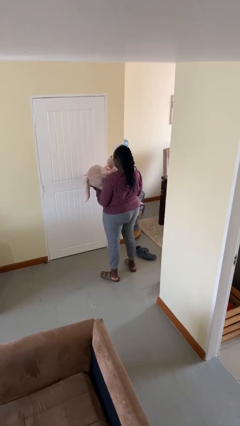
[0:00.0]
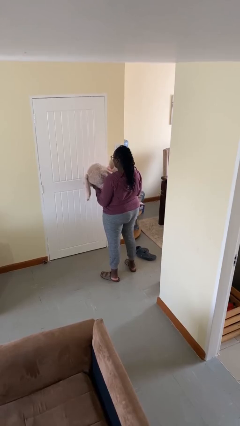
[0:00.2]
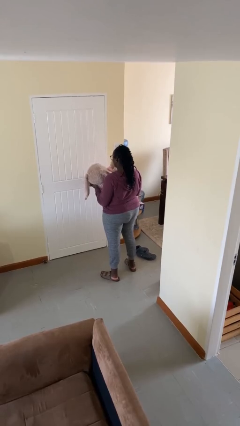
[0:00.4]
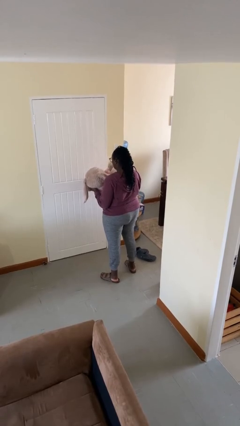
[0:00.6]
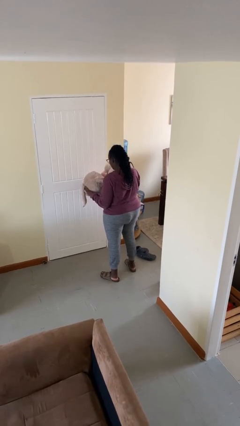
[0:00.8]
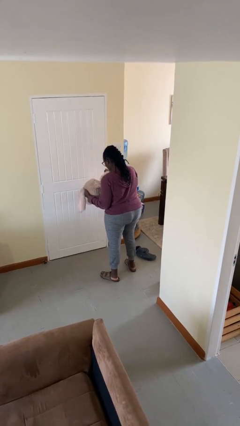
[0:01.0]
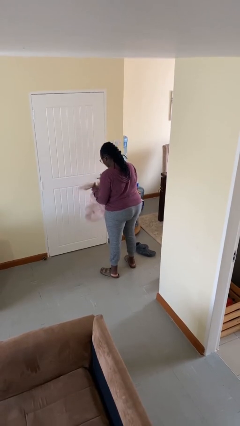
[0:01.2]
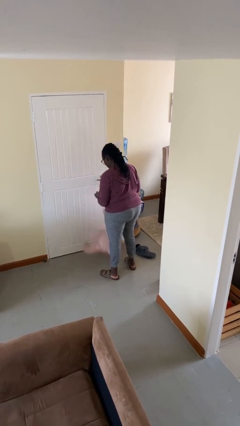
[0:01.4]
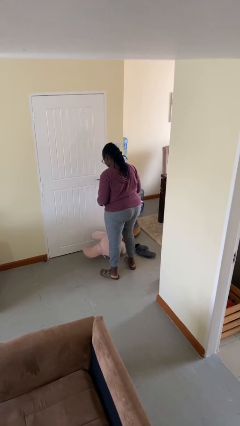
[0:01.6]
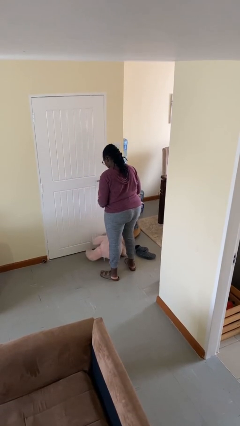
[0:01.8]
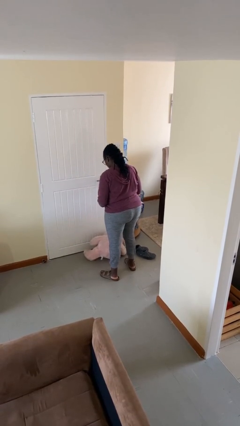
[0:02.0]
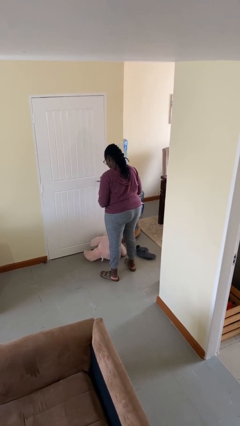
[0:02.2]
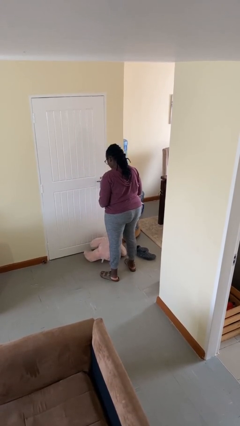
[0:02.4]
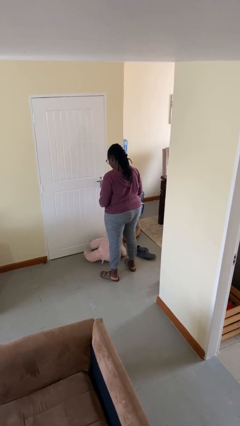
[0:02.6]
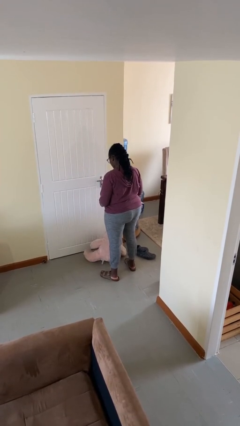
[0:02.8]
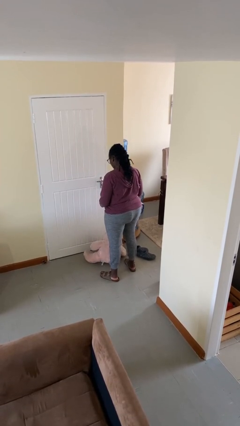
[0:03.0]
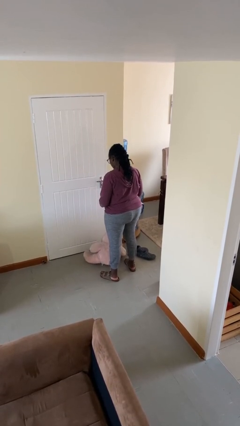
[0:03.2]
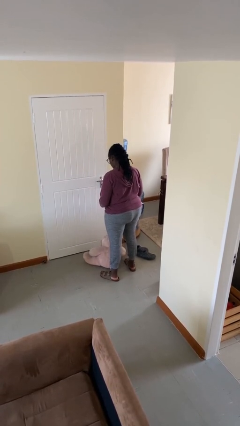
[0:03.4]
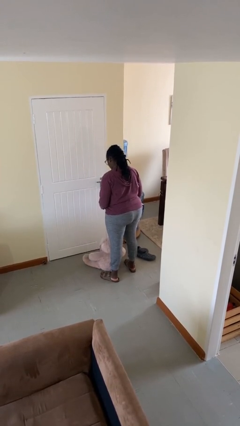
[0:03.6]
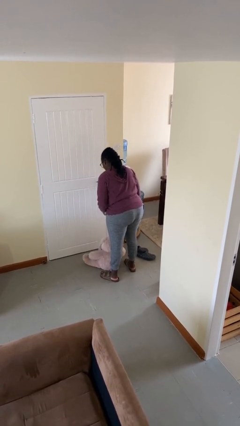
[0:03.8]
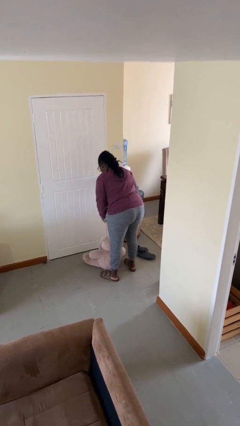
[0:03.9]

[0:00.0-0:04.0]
person drops object

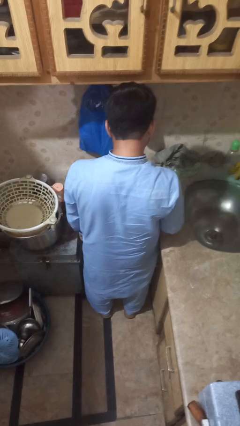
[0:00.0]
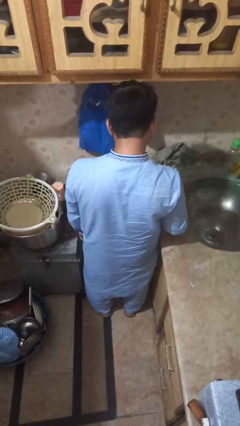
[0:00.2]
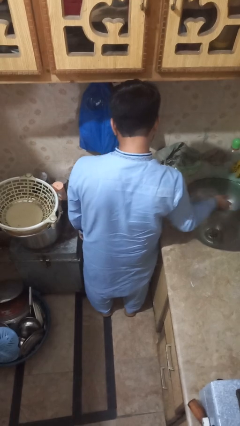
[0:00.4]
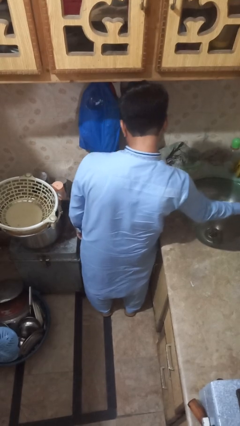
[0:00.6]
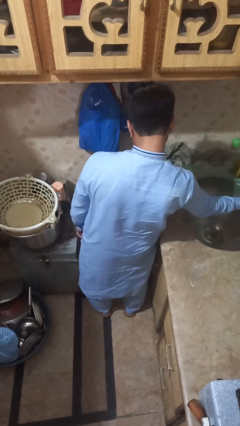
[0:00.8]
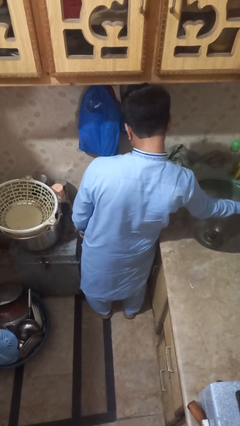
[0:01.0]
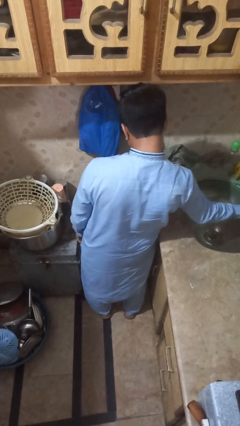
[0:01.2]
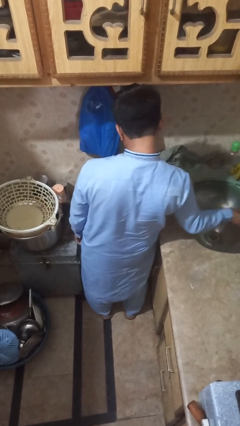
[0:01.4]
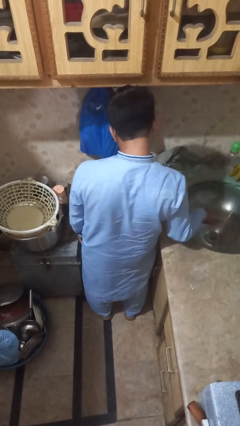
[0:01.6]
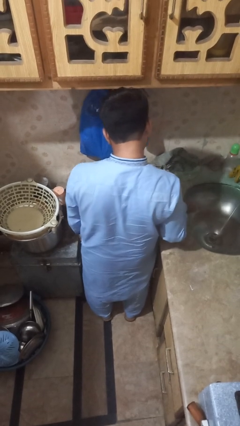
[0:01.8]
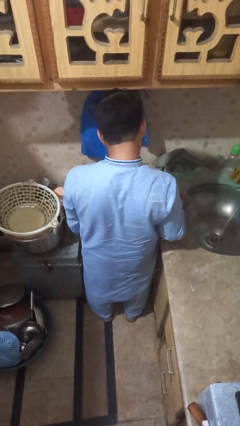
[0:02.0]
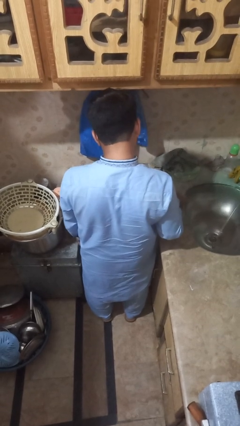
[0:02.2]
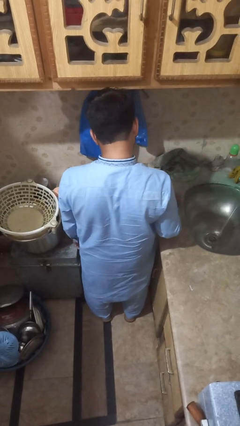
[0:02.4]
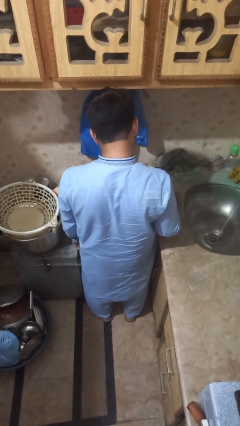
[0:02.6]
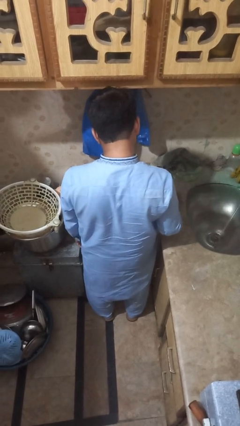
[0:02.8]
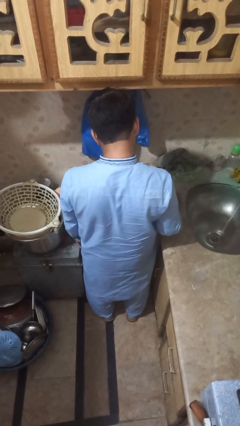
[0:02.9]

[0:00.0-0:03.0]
person turns on faucet

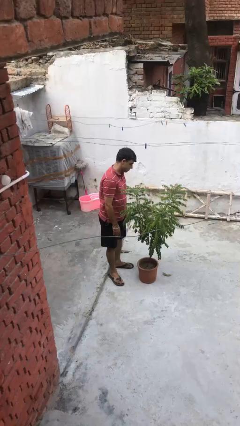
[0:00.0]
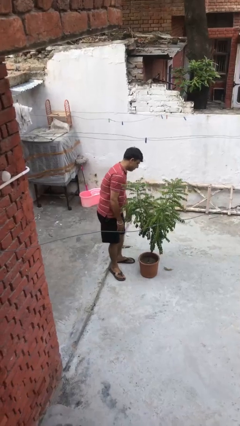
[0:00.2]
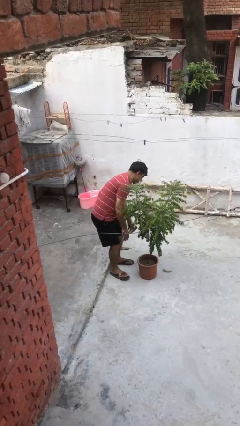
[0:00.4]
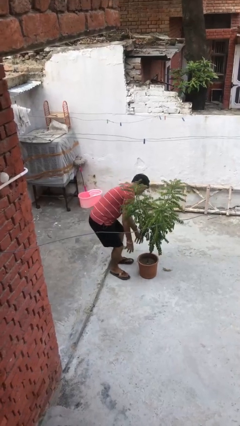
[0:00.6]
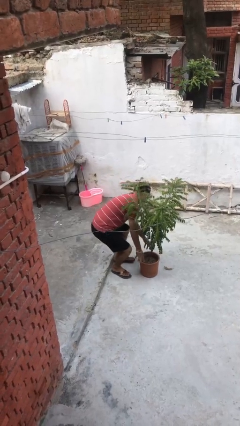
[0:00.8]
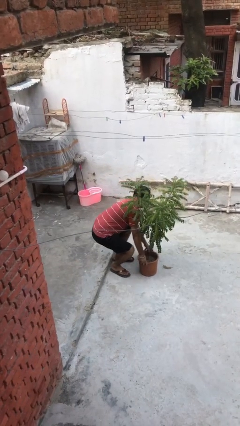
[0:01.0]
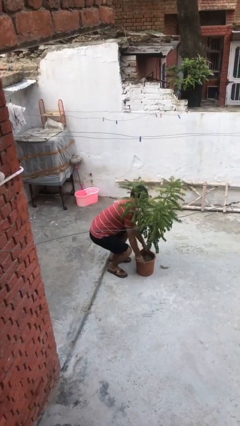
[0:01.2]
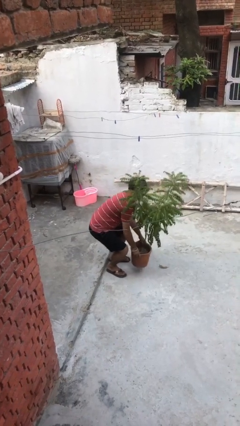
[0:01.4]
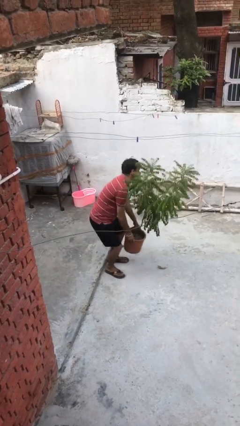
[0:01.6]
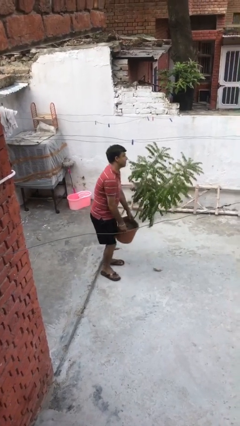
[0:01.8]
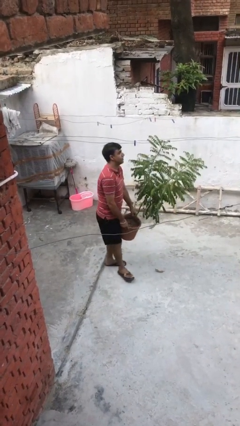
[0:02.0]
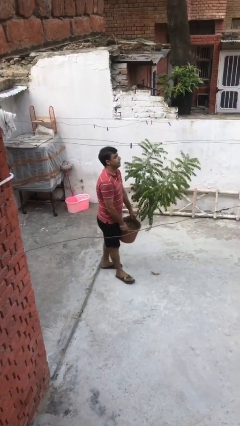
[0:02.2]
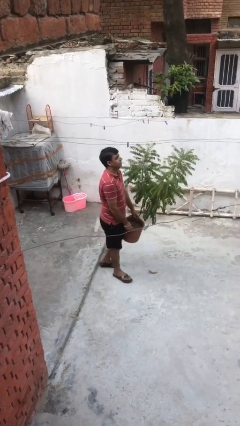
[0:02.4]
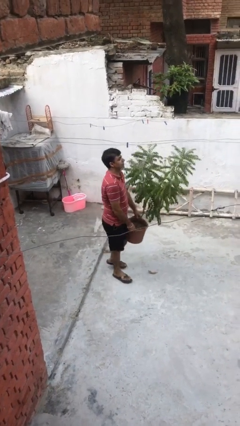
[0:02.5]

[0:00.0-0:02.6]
person picks up object from floor

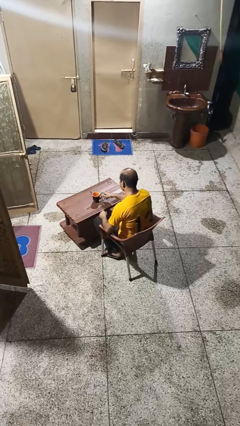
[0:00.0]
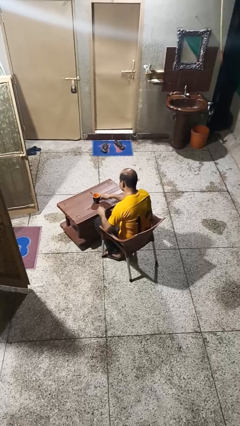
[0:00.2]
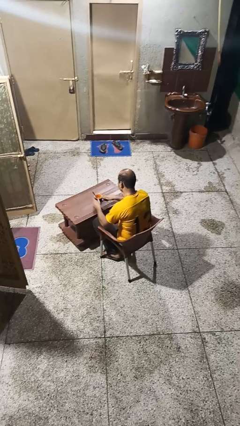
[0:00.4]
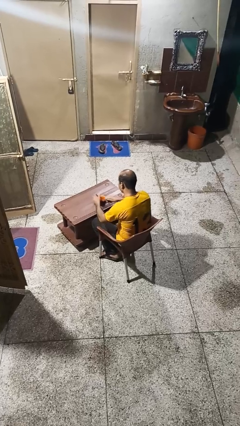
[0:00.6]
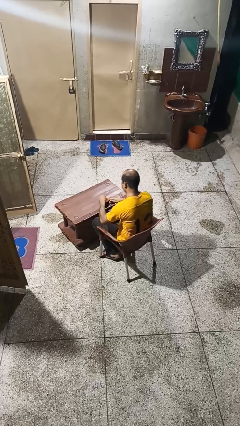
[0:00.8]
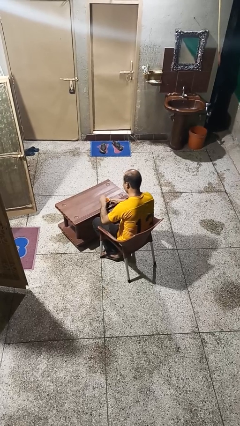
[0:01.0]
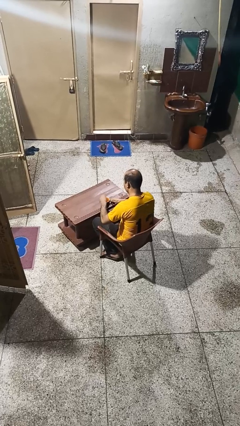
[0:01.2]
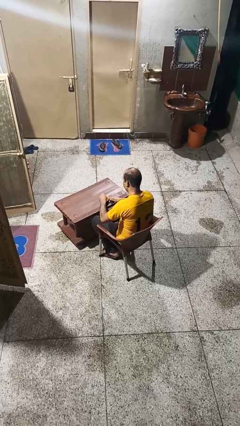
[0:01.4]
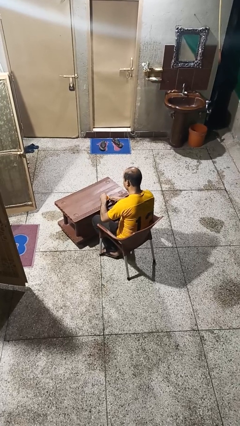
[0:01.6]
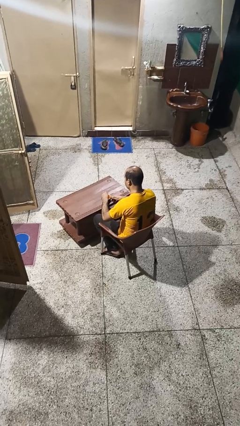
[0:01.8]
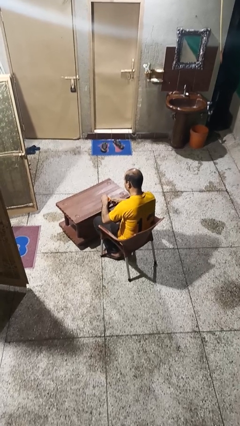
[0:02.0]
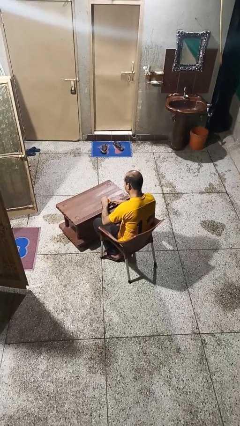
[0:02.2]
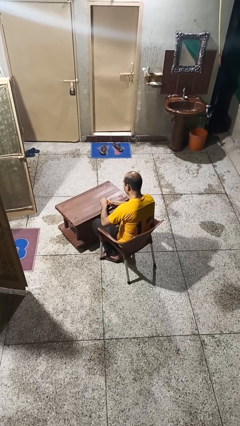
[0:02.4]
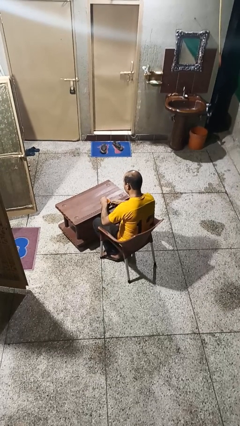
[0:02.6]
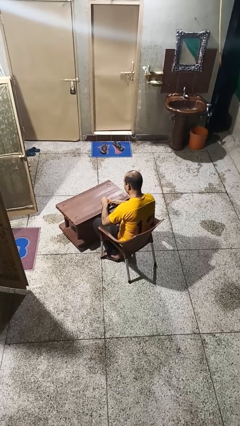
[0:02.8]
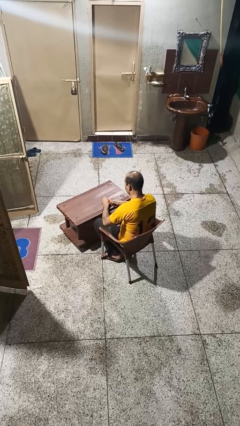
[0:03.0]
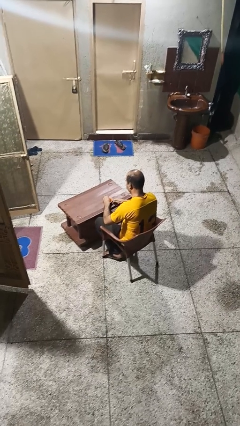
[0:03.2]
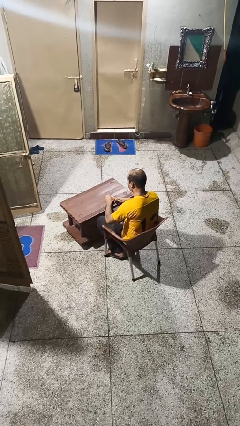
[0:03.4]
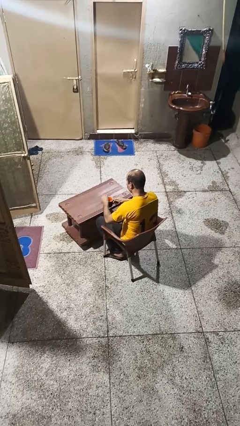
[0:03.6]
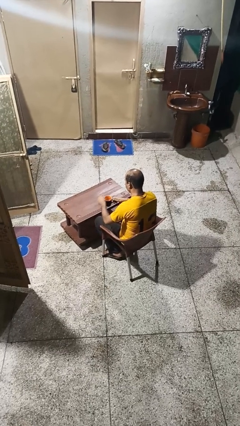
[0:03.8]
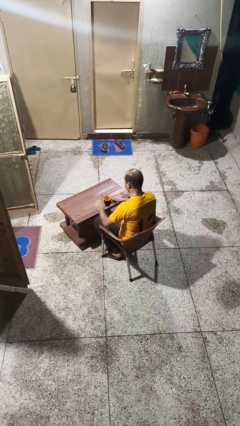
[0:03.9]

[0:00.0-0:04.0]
person stirs mug

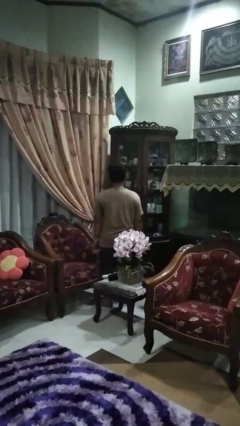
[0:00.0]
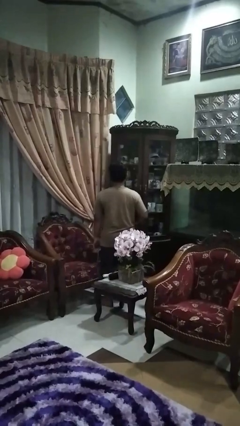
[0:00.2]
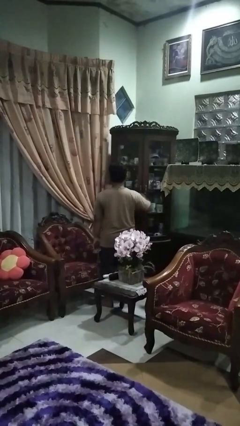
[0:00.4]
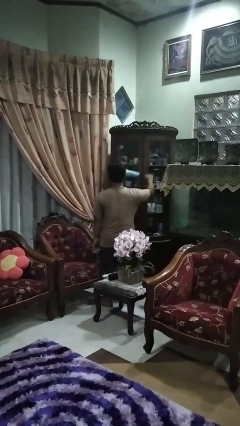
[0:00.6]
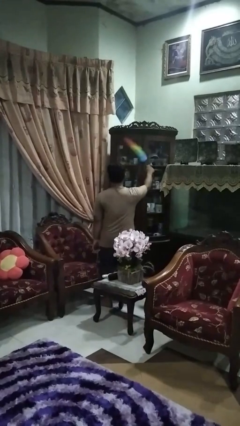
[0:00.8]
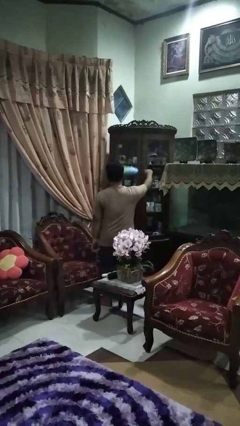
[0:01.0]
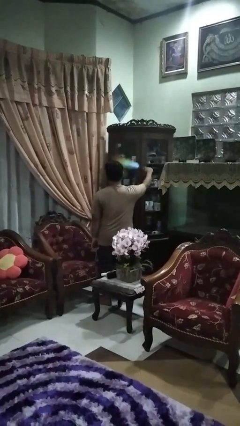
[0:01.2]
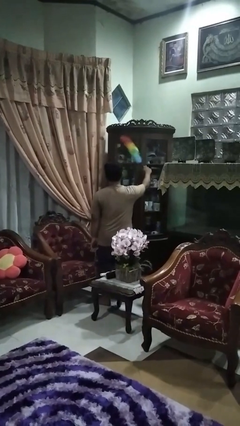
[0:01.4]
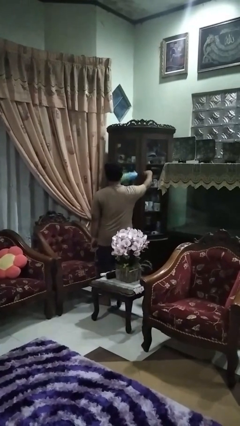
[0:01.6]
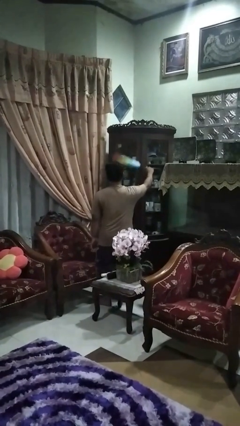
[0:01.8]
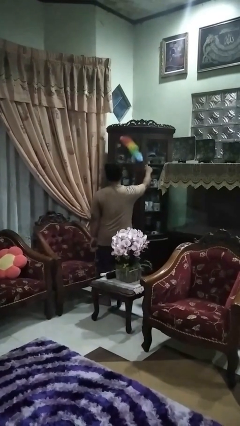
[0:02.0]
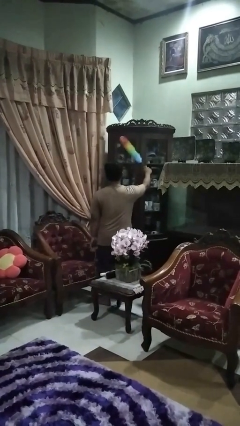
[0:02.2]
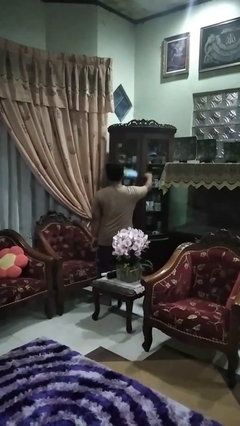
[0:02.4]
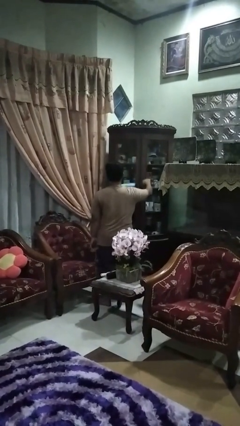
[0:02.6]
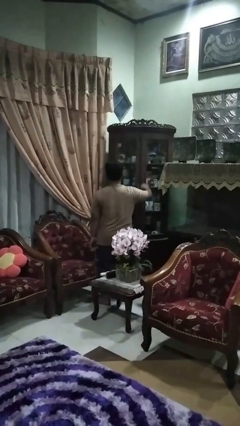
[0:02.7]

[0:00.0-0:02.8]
person dusts furniture

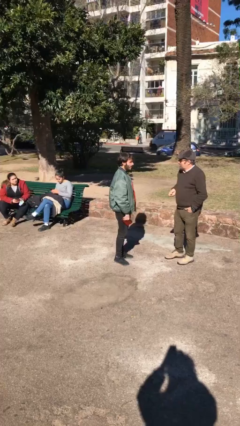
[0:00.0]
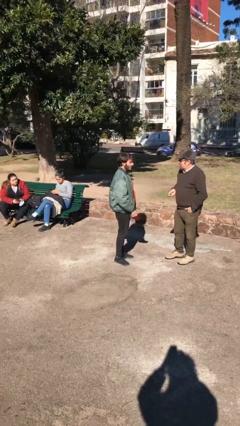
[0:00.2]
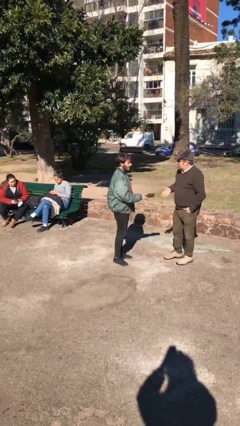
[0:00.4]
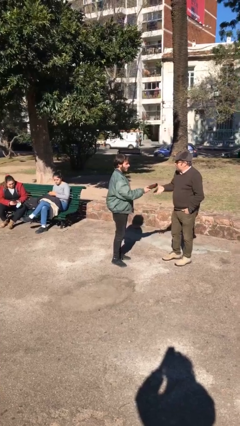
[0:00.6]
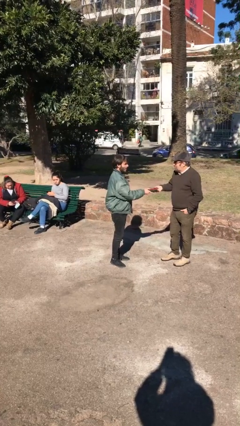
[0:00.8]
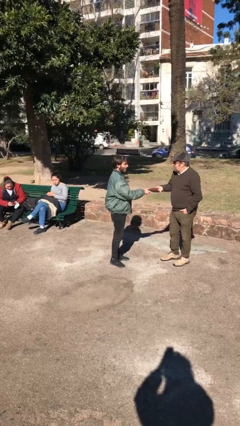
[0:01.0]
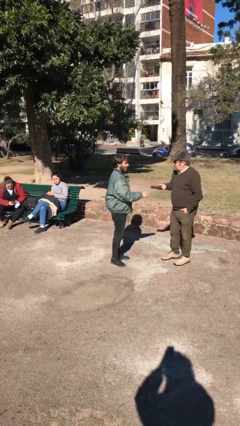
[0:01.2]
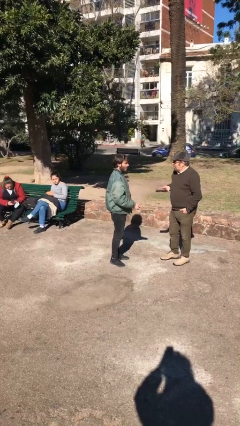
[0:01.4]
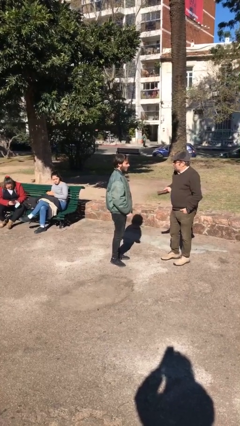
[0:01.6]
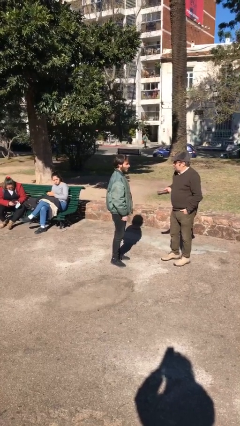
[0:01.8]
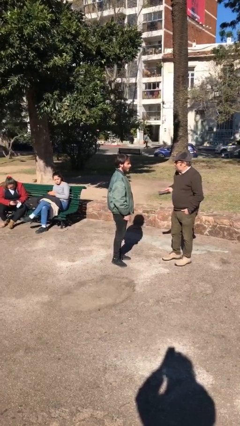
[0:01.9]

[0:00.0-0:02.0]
person transfers object to person
